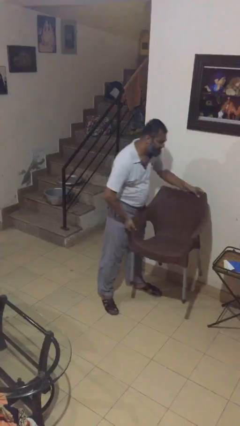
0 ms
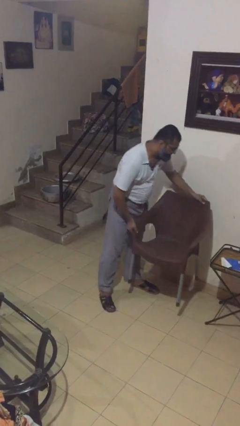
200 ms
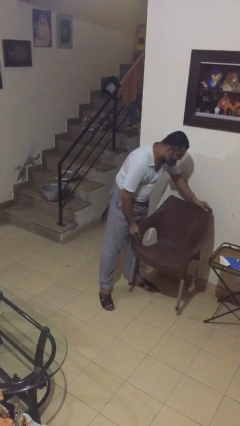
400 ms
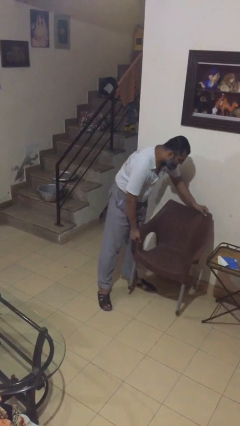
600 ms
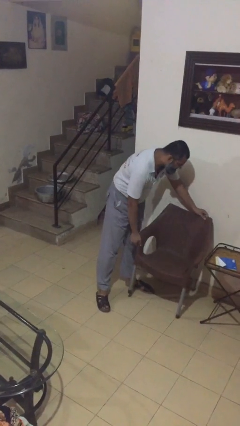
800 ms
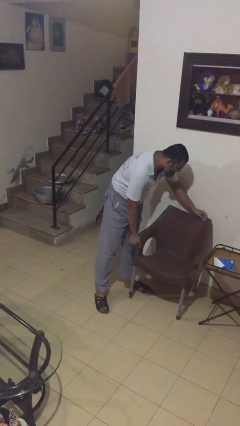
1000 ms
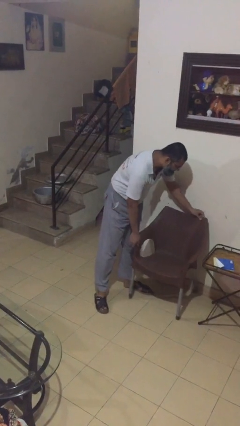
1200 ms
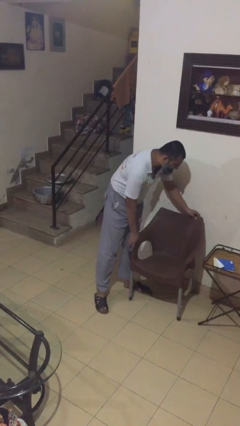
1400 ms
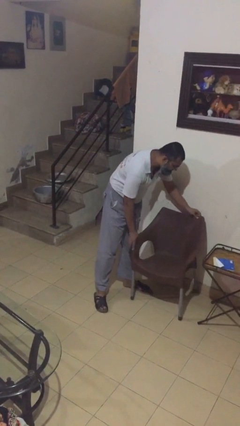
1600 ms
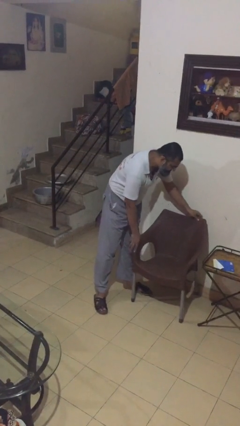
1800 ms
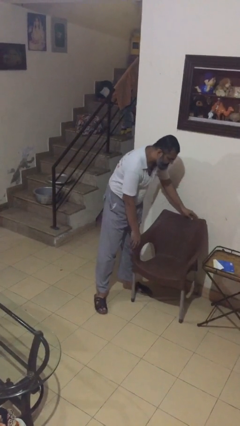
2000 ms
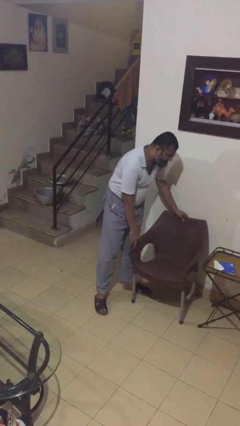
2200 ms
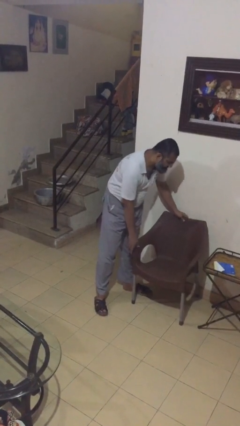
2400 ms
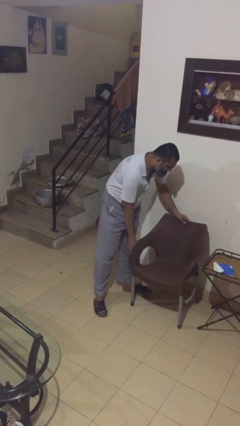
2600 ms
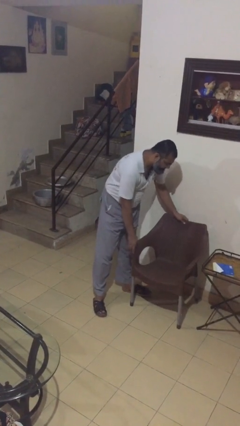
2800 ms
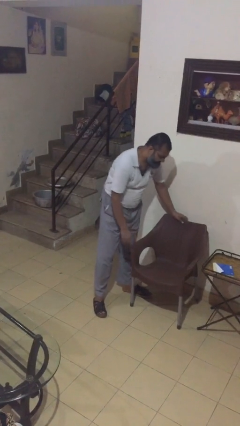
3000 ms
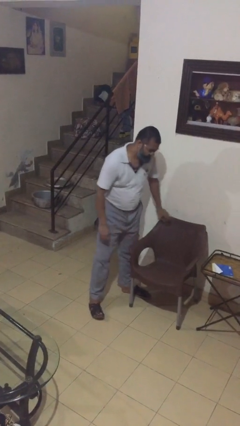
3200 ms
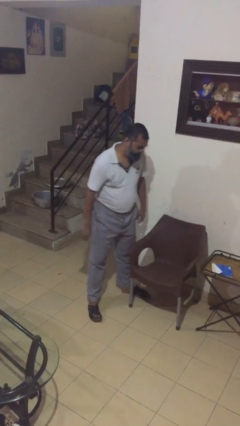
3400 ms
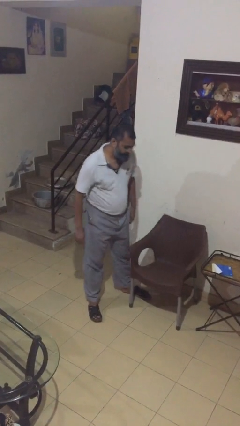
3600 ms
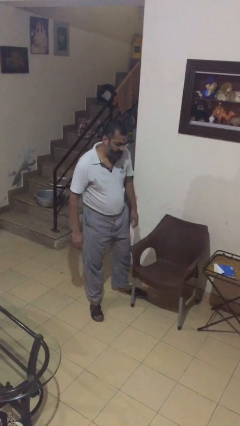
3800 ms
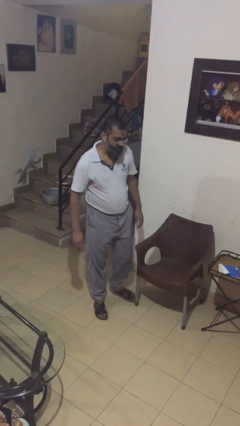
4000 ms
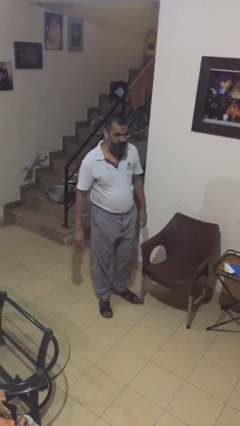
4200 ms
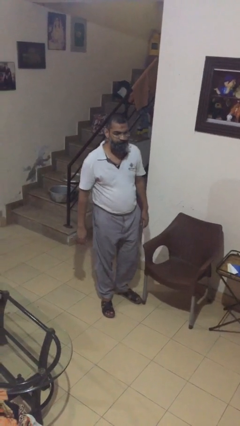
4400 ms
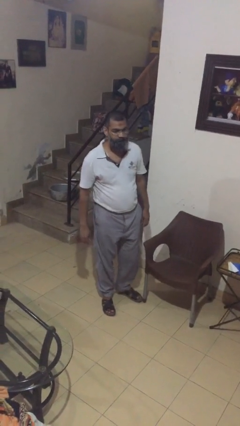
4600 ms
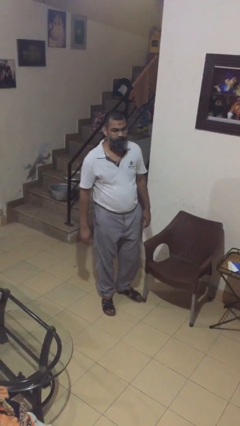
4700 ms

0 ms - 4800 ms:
person puts down object on floor

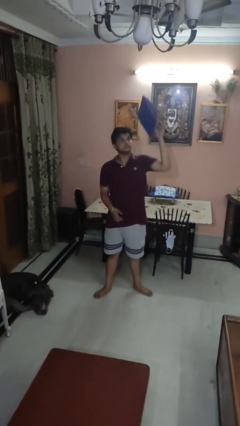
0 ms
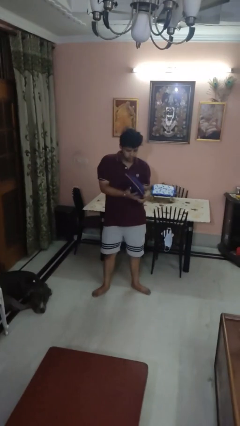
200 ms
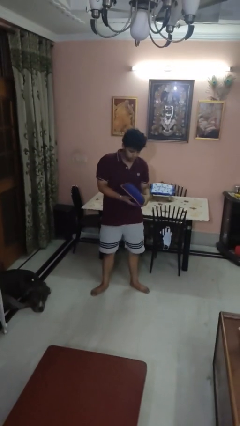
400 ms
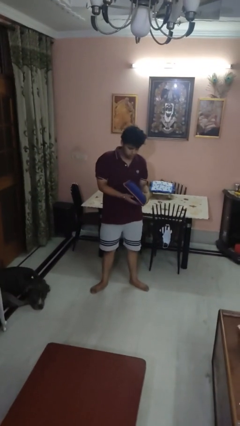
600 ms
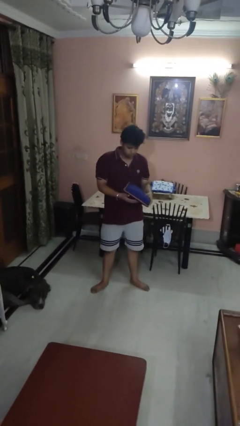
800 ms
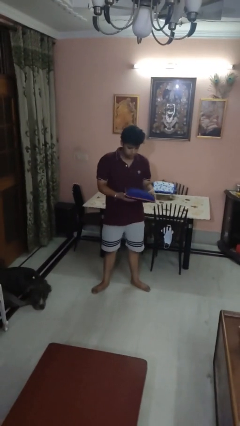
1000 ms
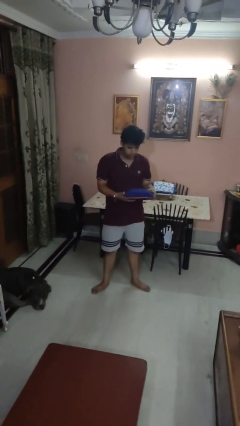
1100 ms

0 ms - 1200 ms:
person catches dropped object

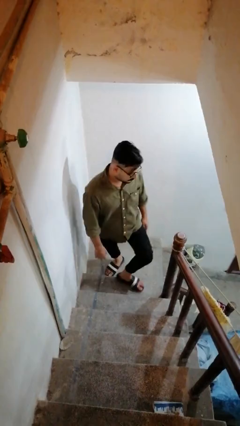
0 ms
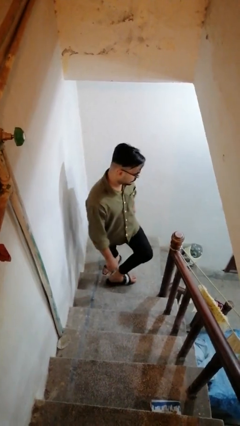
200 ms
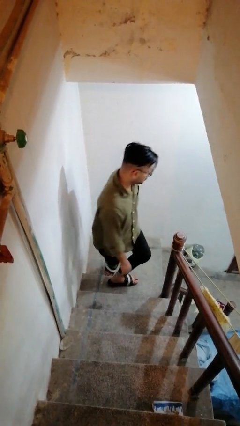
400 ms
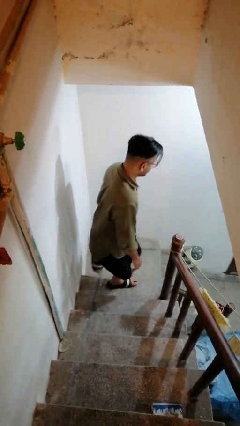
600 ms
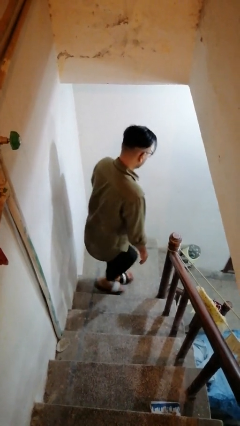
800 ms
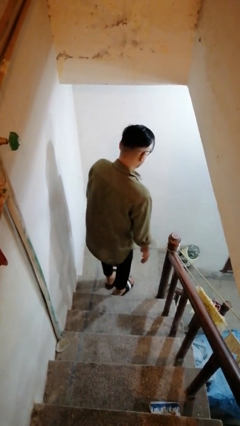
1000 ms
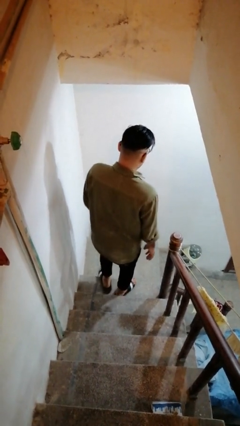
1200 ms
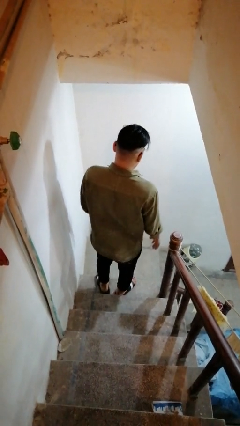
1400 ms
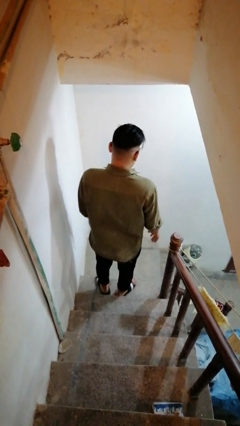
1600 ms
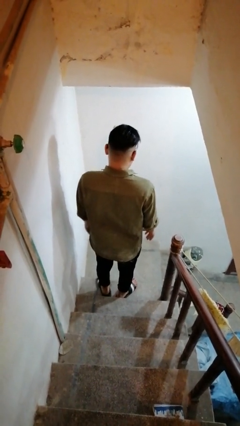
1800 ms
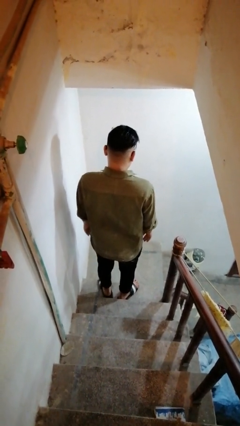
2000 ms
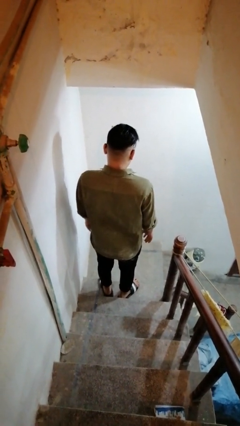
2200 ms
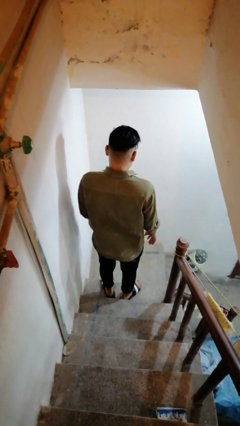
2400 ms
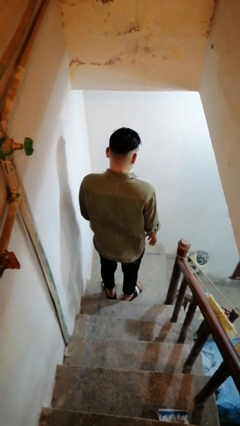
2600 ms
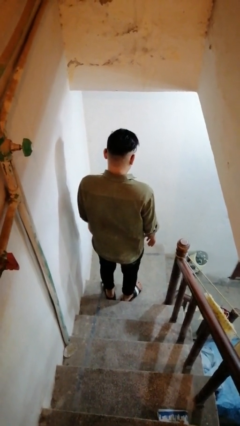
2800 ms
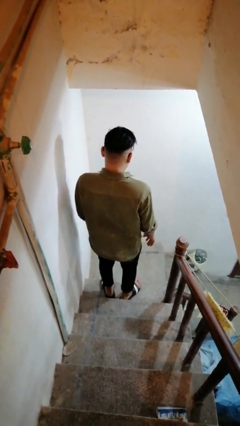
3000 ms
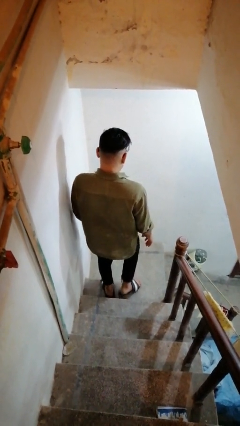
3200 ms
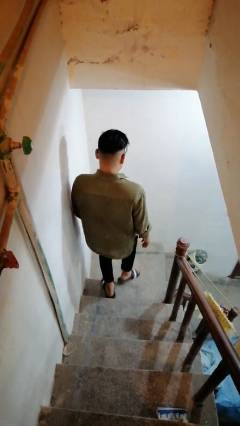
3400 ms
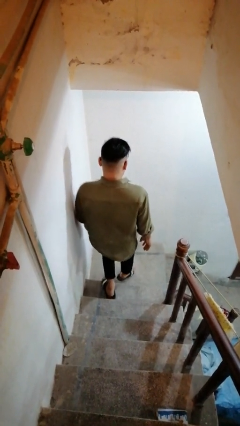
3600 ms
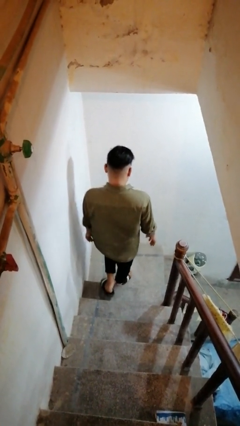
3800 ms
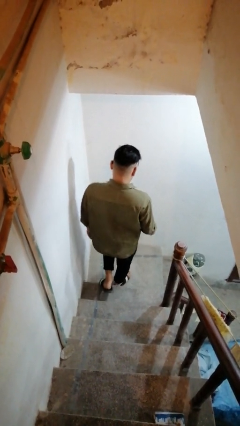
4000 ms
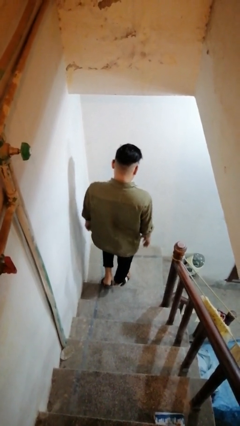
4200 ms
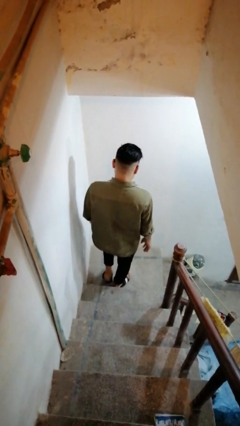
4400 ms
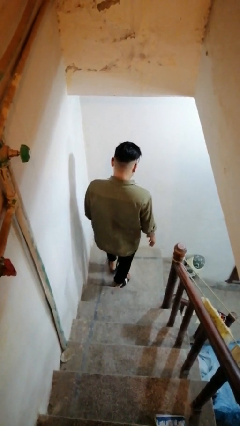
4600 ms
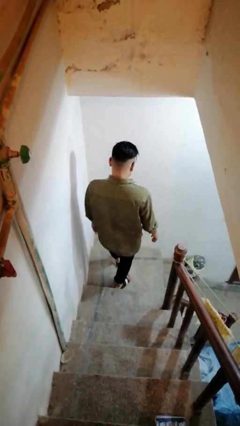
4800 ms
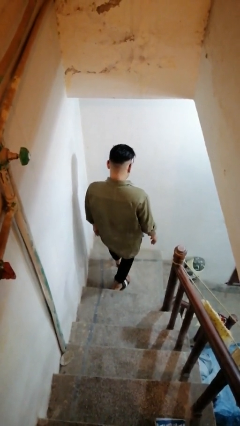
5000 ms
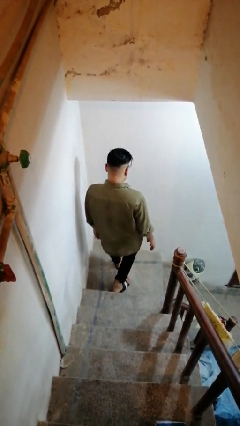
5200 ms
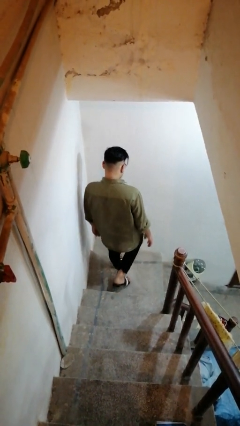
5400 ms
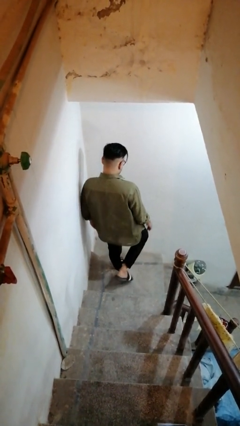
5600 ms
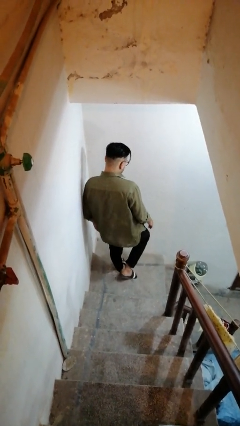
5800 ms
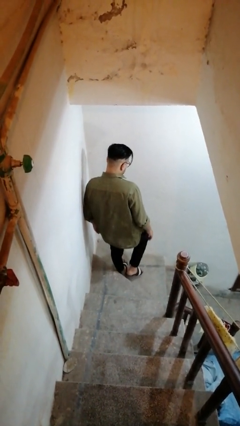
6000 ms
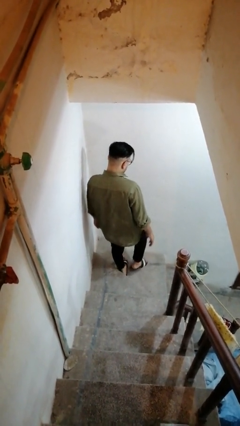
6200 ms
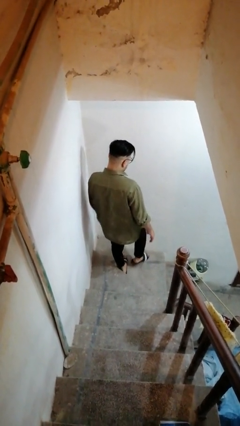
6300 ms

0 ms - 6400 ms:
person climbs down stairs

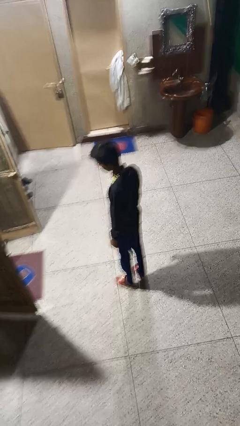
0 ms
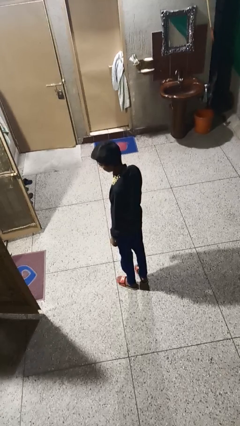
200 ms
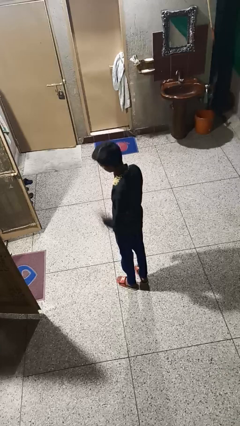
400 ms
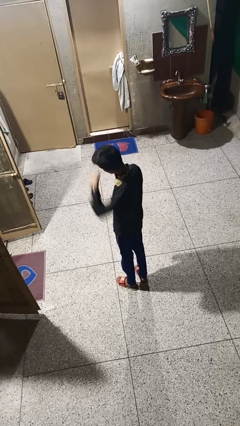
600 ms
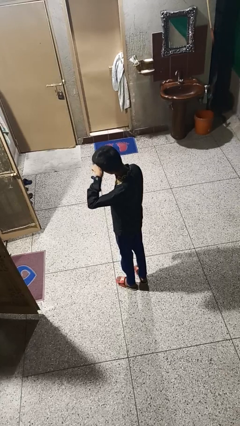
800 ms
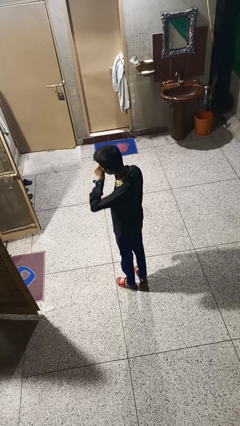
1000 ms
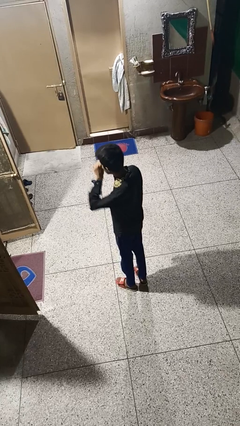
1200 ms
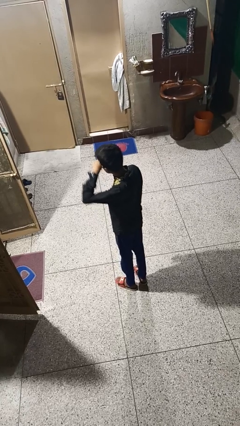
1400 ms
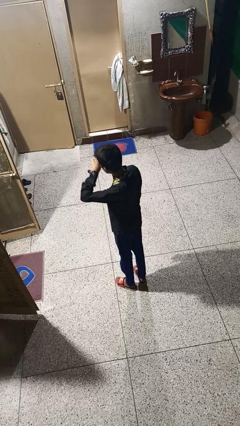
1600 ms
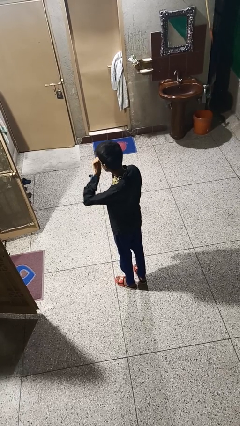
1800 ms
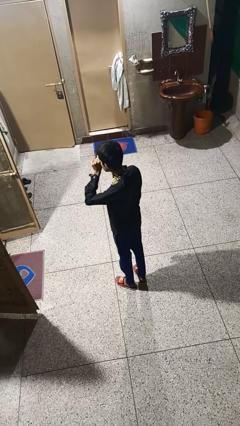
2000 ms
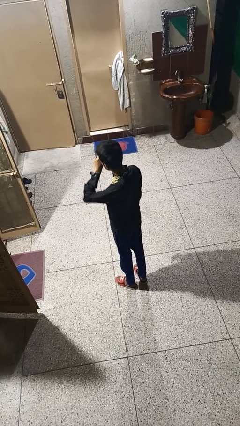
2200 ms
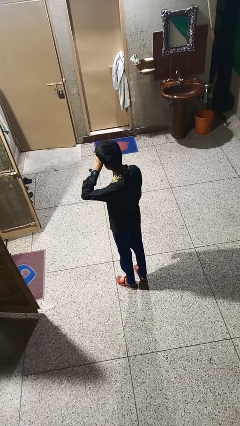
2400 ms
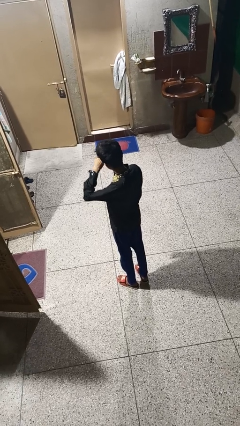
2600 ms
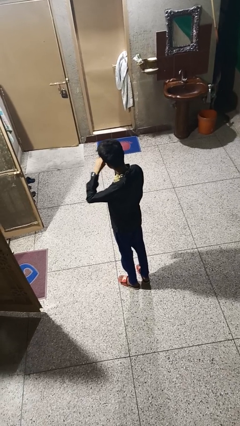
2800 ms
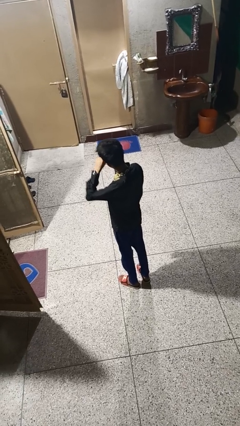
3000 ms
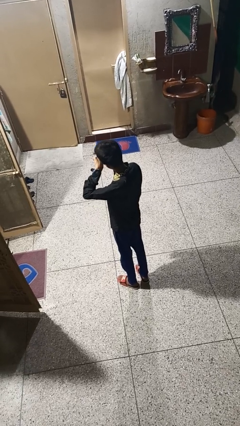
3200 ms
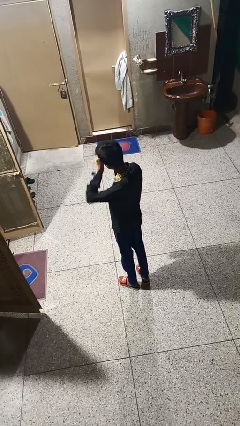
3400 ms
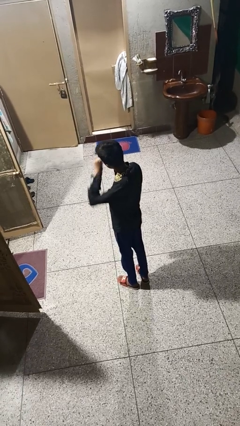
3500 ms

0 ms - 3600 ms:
person rubs eyes

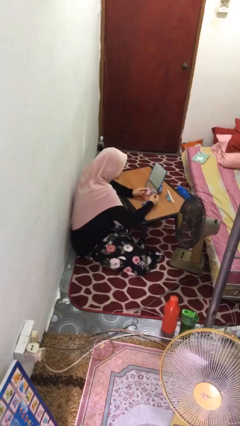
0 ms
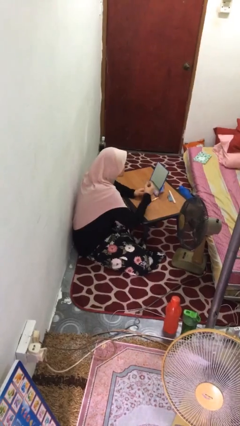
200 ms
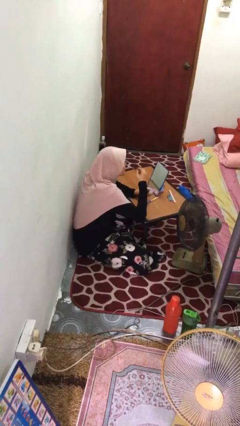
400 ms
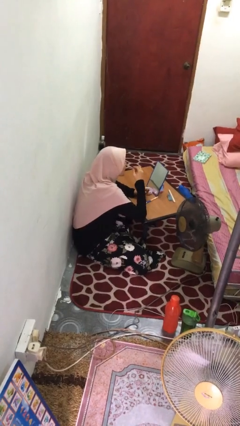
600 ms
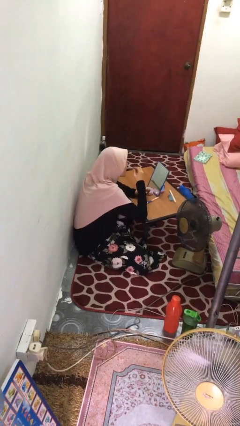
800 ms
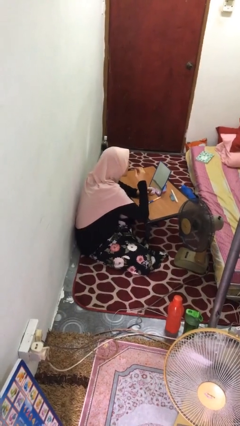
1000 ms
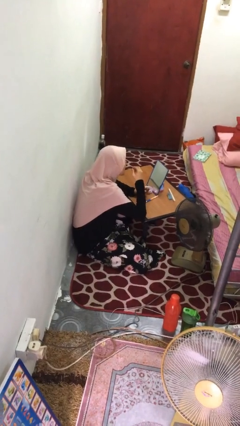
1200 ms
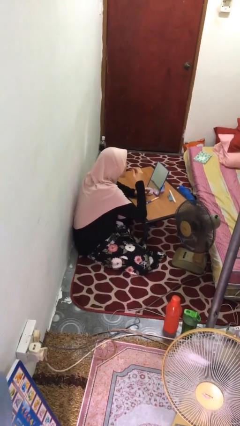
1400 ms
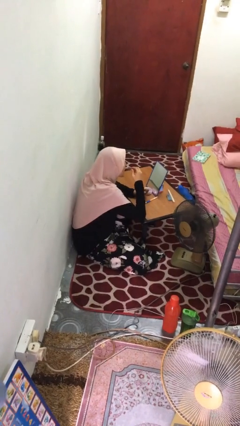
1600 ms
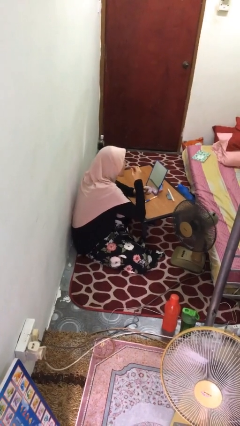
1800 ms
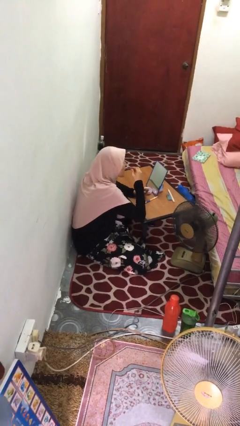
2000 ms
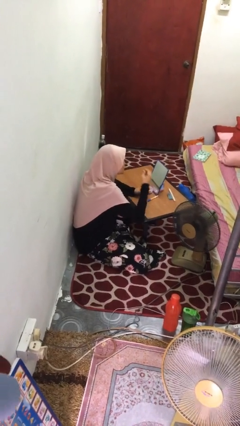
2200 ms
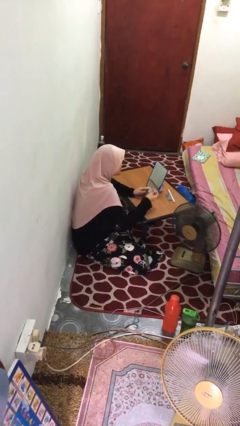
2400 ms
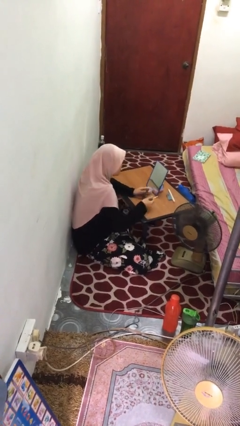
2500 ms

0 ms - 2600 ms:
person applies lip makeup
